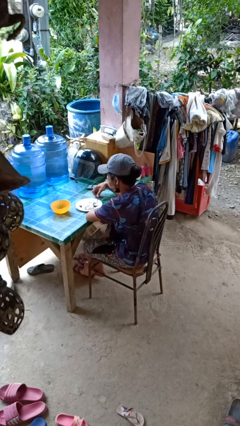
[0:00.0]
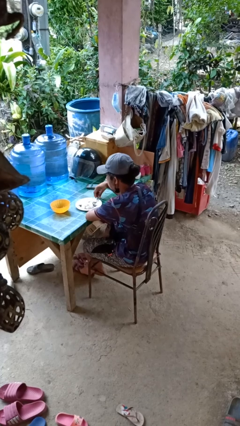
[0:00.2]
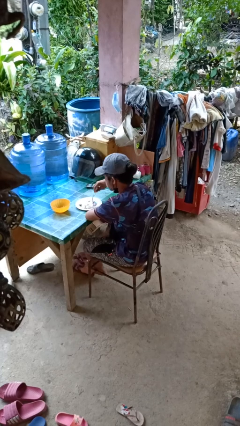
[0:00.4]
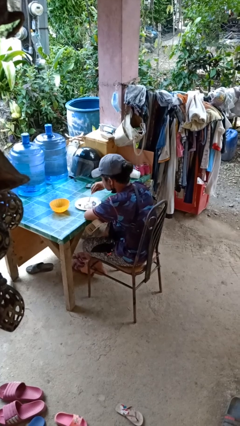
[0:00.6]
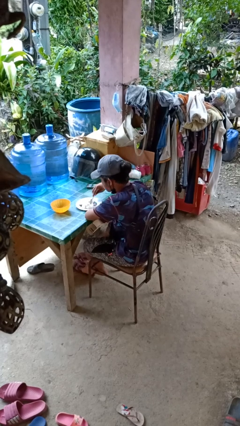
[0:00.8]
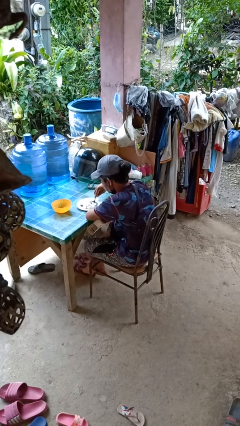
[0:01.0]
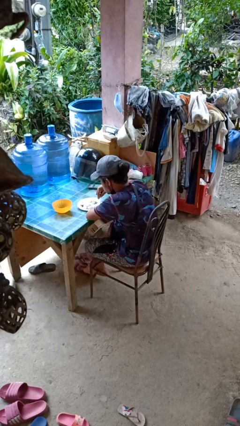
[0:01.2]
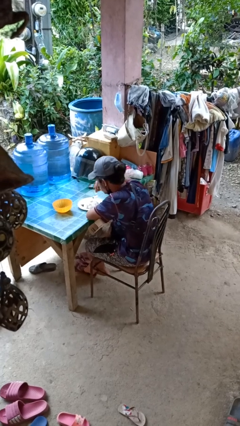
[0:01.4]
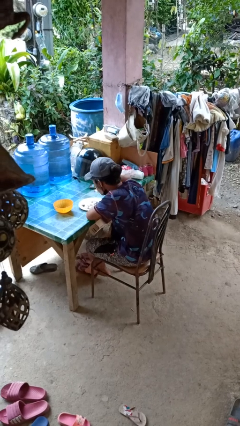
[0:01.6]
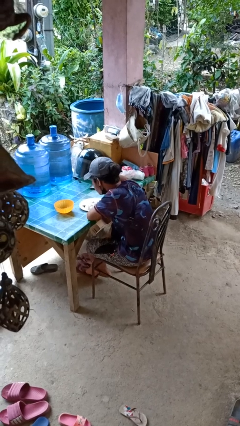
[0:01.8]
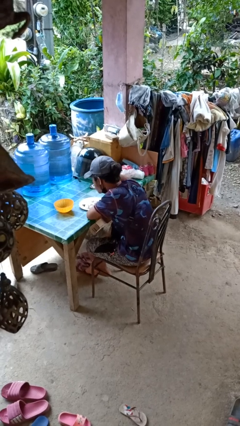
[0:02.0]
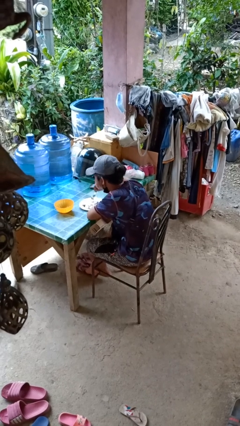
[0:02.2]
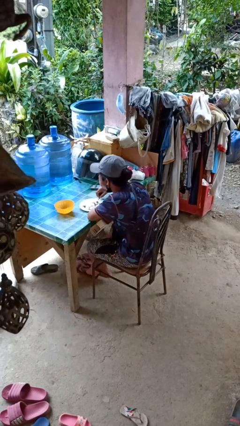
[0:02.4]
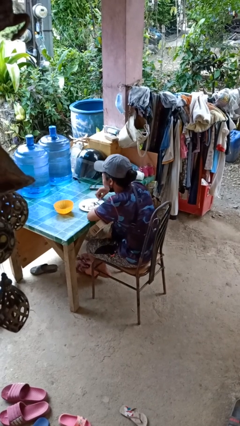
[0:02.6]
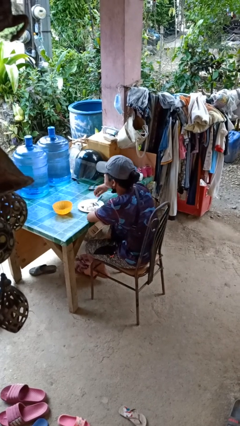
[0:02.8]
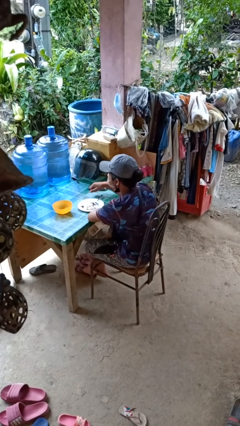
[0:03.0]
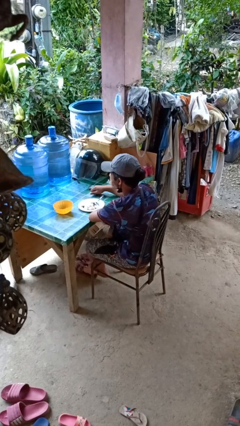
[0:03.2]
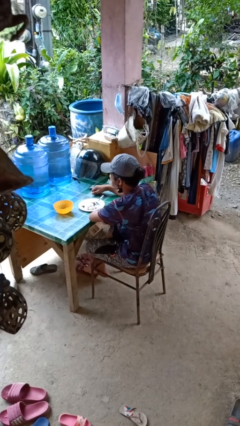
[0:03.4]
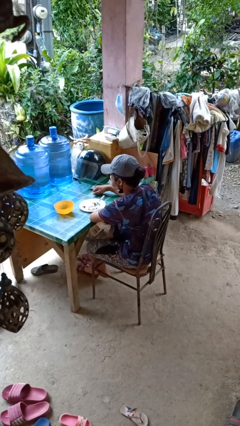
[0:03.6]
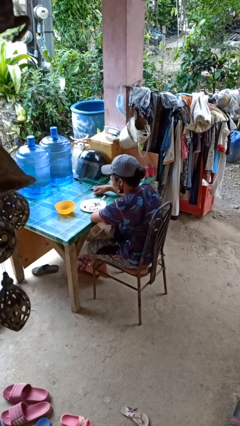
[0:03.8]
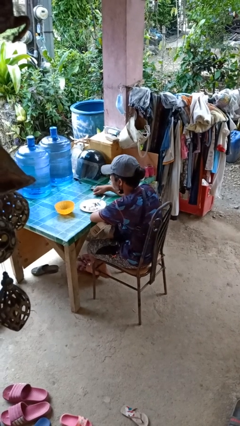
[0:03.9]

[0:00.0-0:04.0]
person eats with utensil

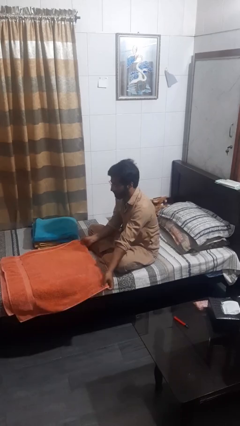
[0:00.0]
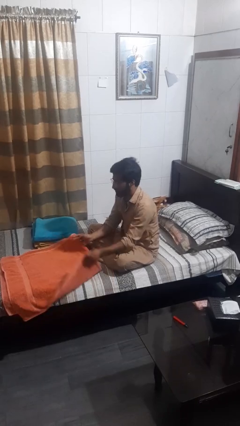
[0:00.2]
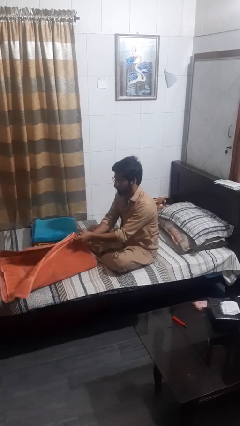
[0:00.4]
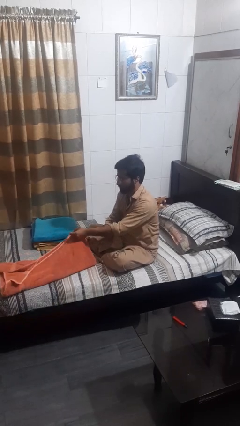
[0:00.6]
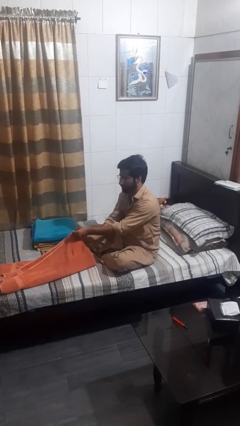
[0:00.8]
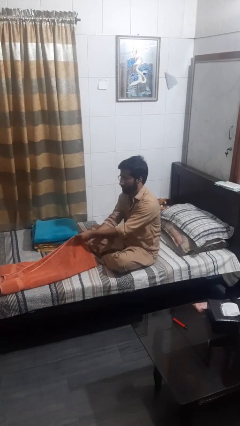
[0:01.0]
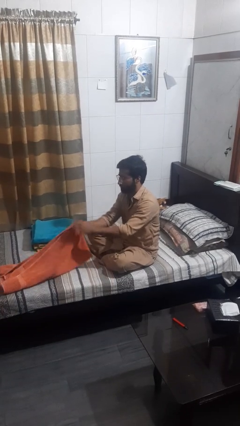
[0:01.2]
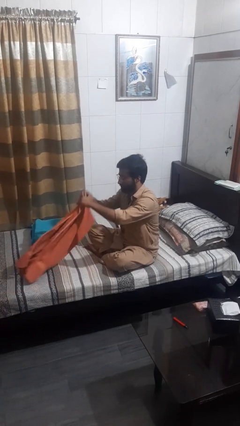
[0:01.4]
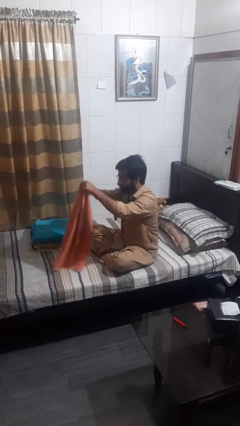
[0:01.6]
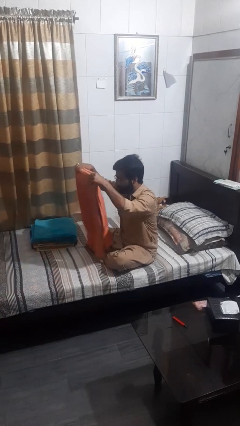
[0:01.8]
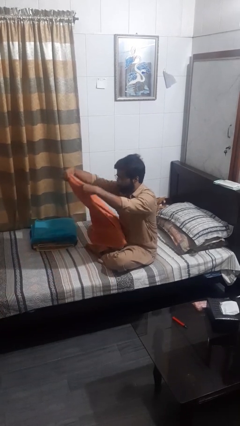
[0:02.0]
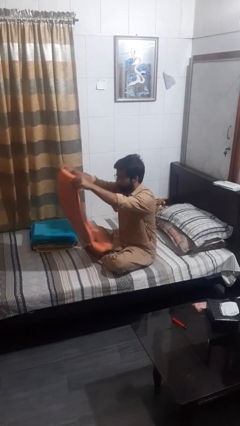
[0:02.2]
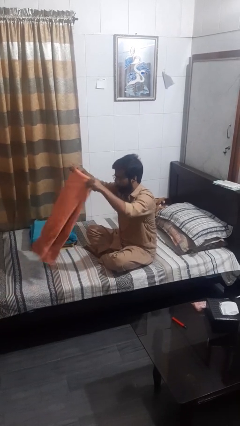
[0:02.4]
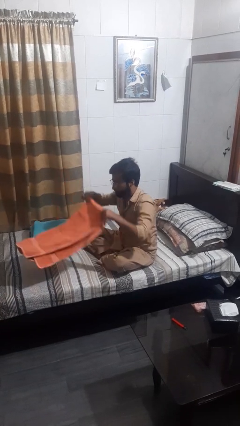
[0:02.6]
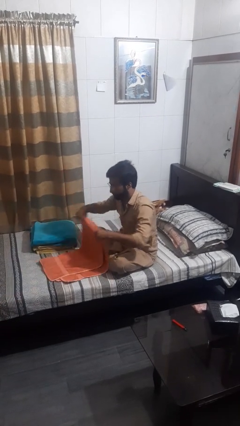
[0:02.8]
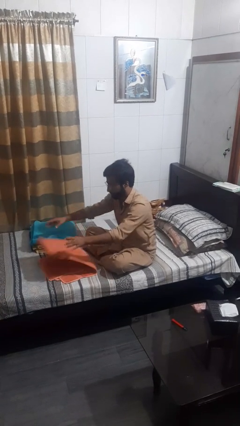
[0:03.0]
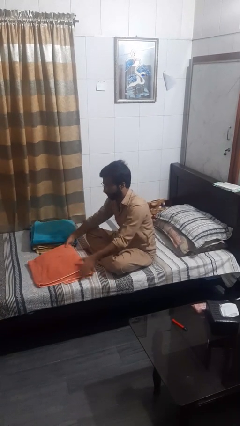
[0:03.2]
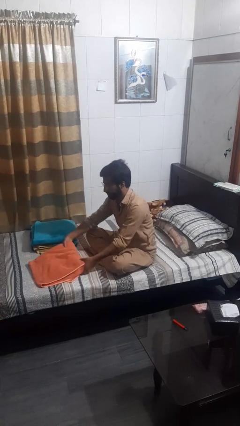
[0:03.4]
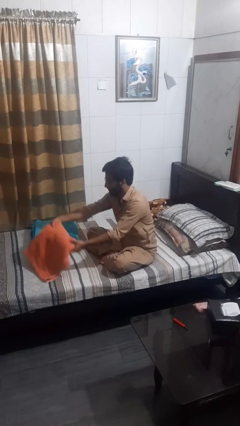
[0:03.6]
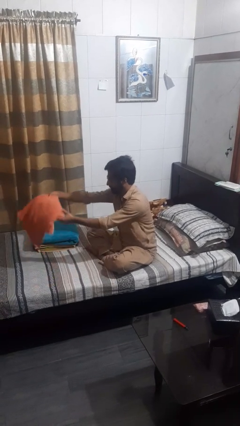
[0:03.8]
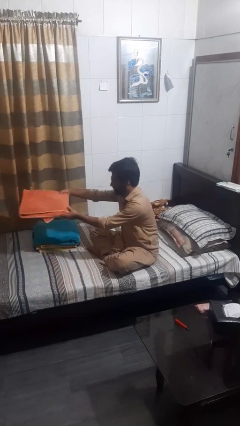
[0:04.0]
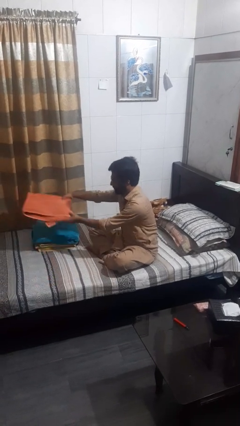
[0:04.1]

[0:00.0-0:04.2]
person folds towel

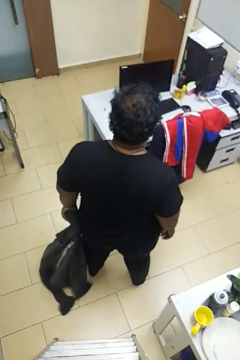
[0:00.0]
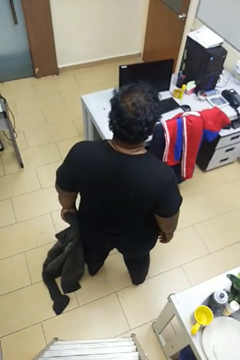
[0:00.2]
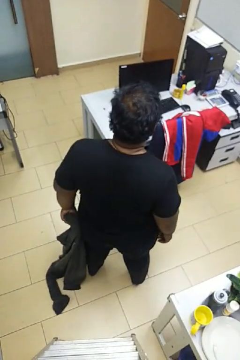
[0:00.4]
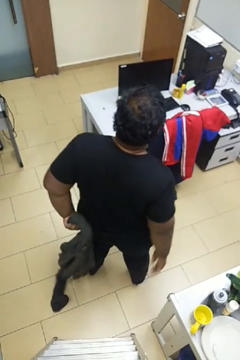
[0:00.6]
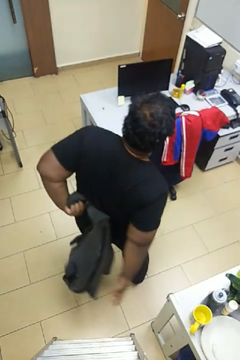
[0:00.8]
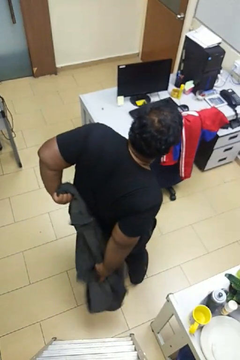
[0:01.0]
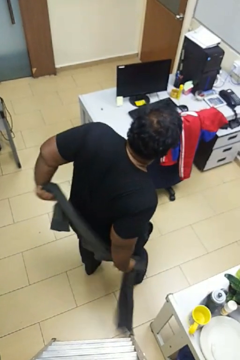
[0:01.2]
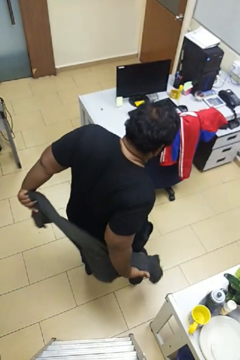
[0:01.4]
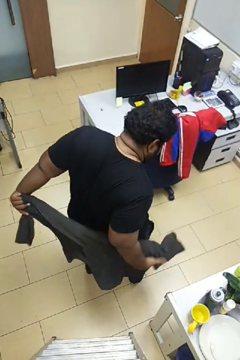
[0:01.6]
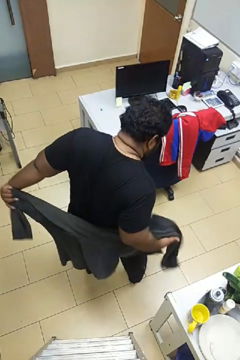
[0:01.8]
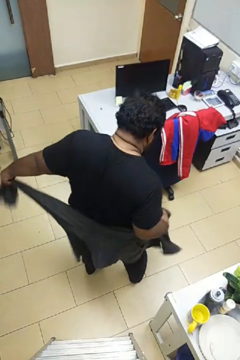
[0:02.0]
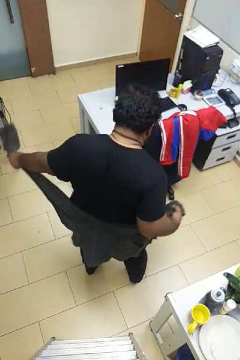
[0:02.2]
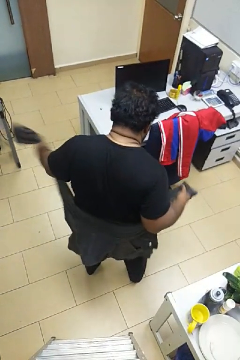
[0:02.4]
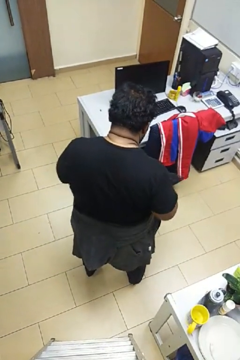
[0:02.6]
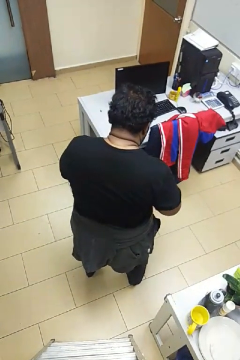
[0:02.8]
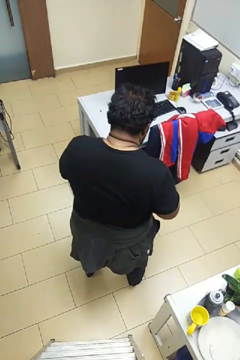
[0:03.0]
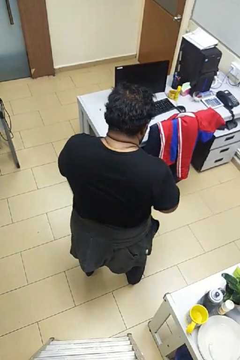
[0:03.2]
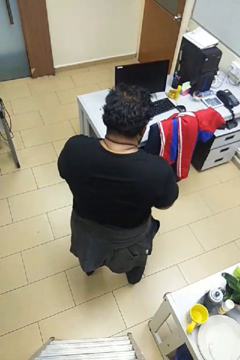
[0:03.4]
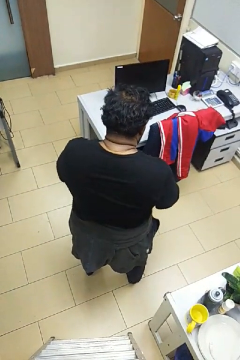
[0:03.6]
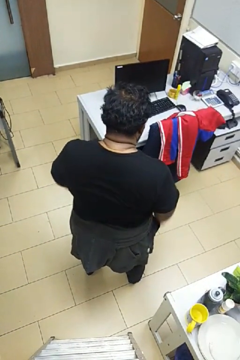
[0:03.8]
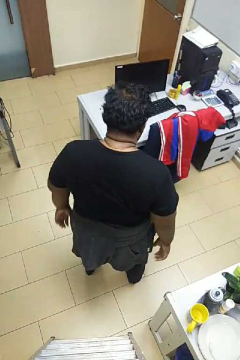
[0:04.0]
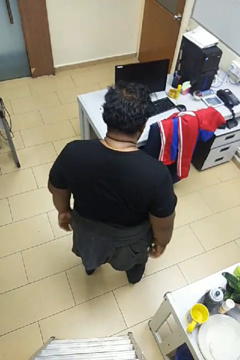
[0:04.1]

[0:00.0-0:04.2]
person ties jacket around waist

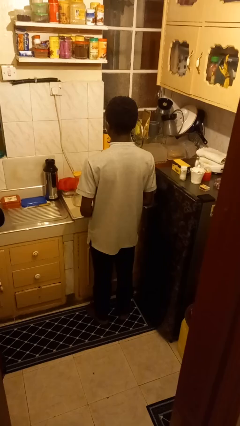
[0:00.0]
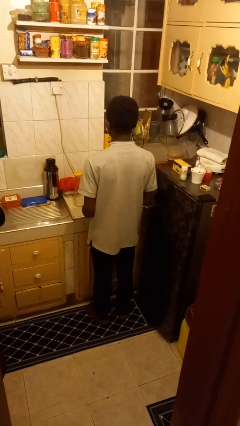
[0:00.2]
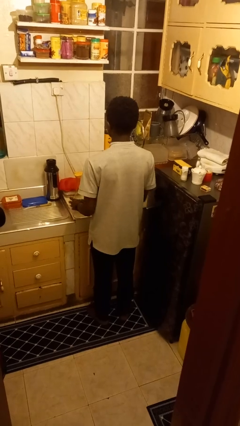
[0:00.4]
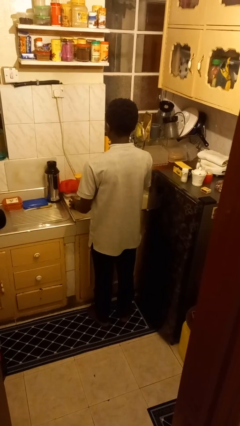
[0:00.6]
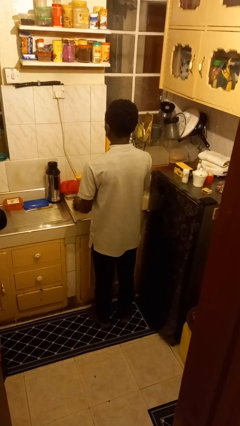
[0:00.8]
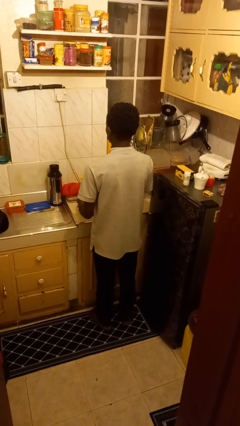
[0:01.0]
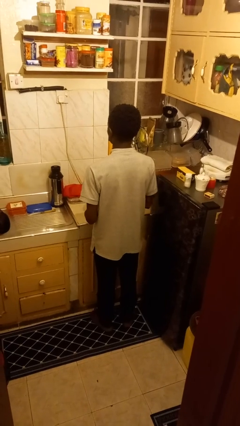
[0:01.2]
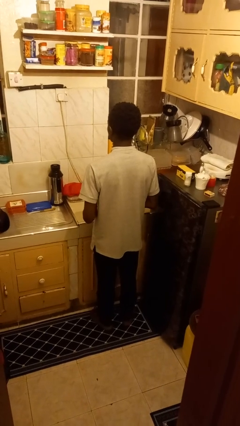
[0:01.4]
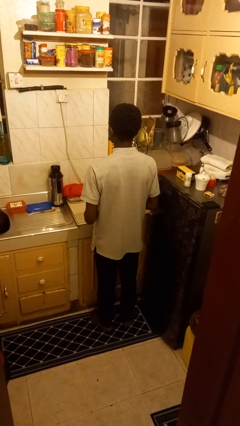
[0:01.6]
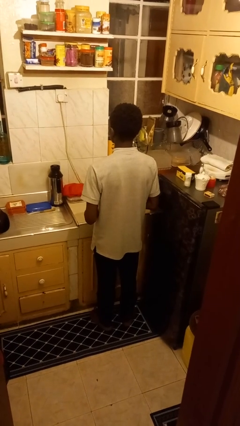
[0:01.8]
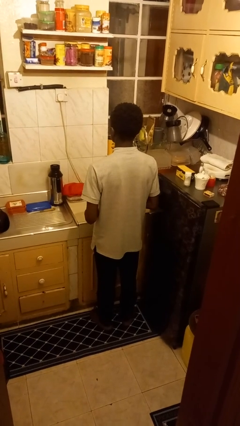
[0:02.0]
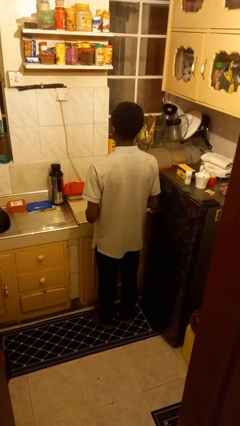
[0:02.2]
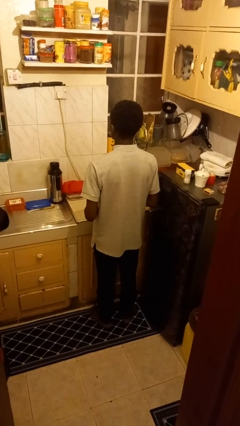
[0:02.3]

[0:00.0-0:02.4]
person picks up object from countertop

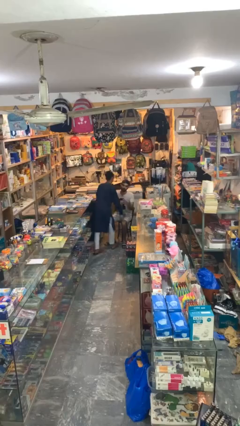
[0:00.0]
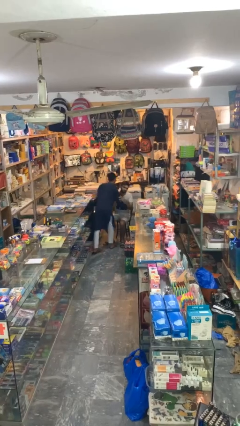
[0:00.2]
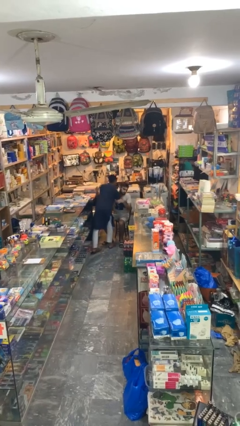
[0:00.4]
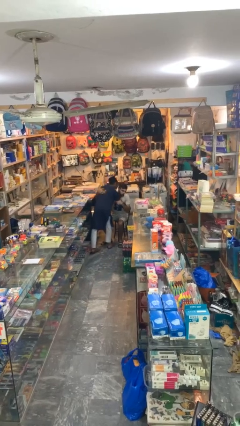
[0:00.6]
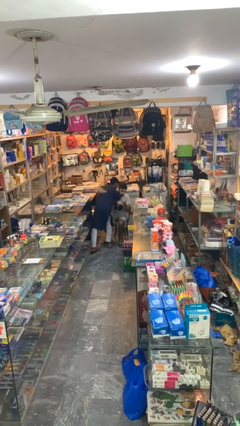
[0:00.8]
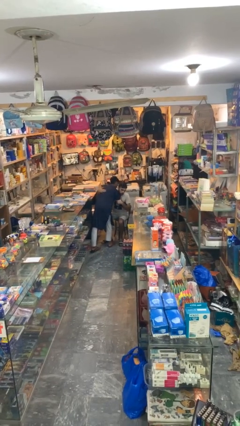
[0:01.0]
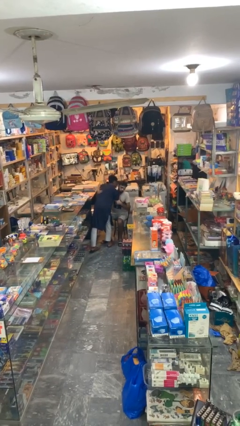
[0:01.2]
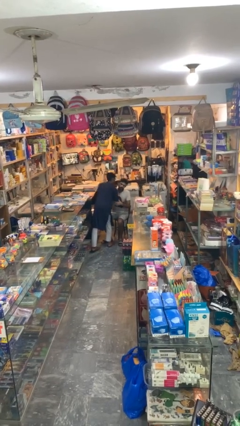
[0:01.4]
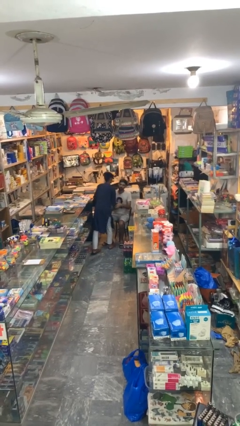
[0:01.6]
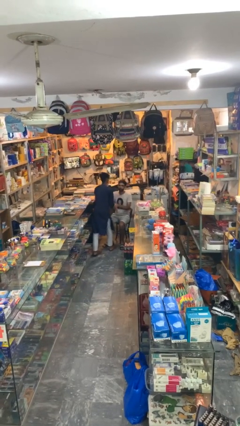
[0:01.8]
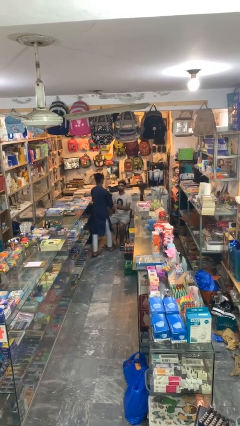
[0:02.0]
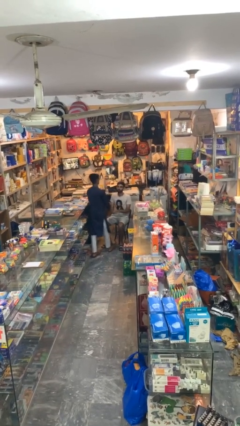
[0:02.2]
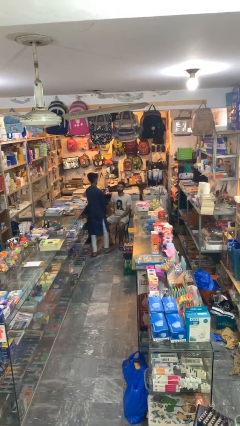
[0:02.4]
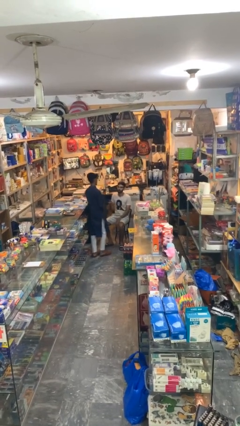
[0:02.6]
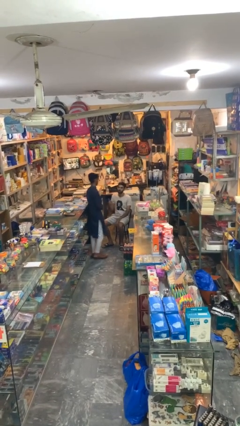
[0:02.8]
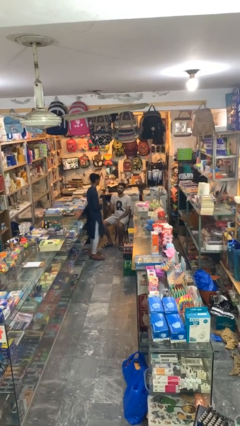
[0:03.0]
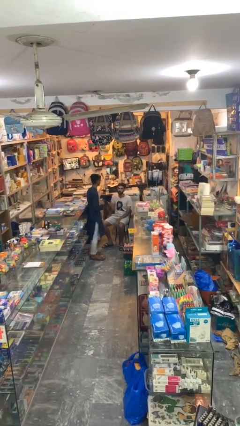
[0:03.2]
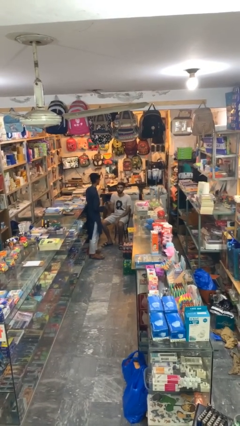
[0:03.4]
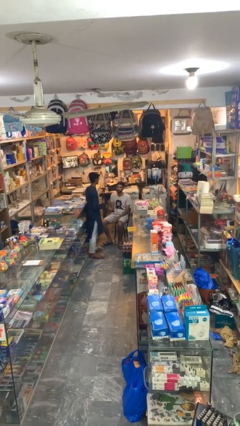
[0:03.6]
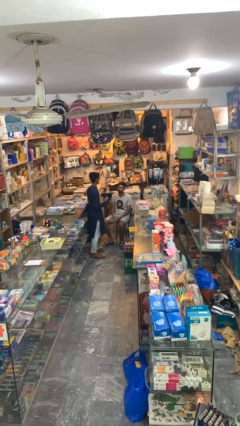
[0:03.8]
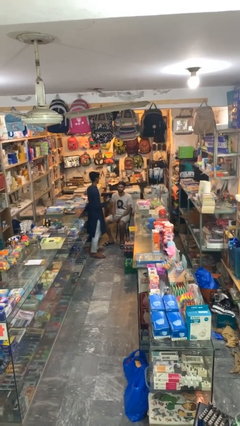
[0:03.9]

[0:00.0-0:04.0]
person embraces person
